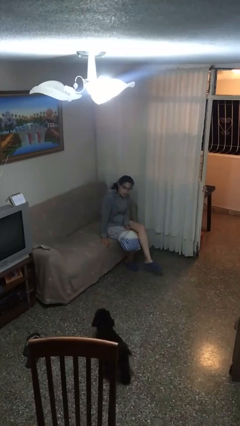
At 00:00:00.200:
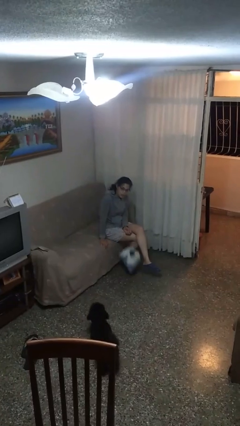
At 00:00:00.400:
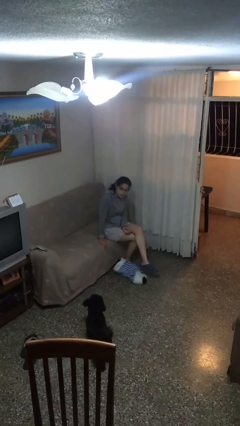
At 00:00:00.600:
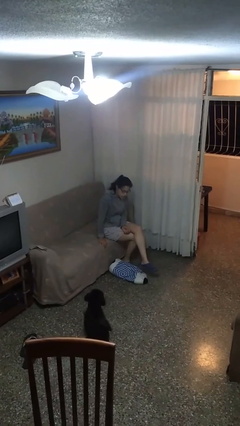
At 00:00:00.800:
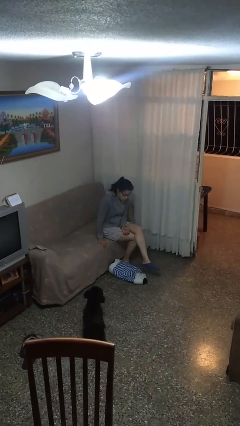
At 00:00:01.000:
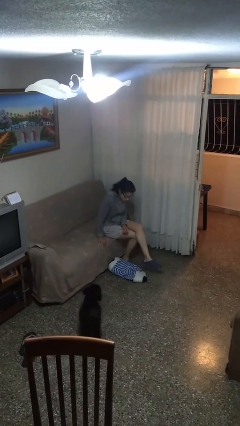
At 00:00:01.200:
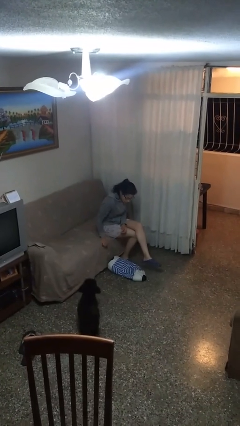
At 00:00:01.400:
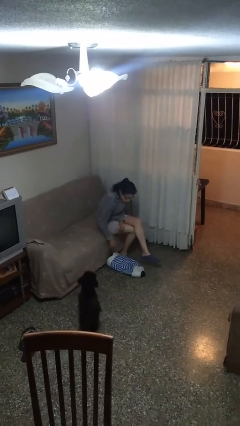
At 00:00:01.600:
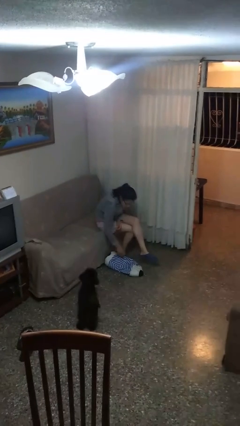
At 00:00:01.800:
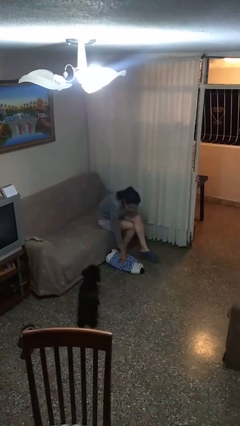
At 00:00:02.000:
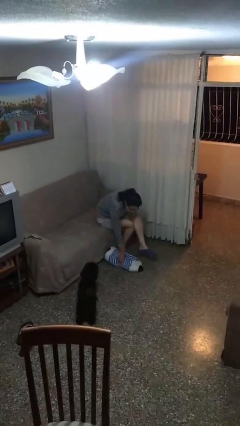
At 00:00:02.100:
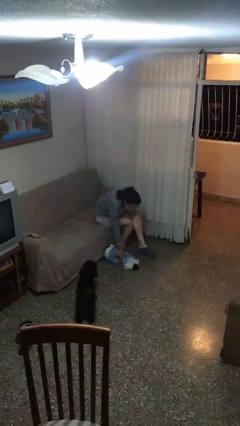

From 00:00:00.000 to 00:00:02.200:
person drops object

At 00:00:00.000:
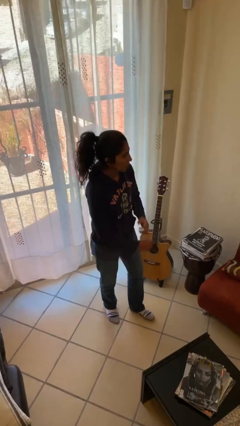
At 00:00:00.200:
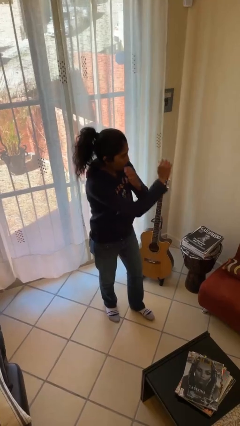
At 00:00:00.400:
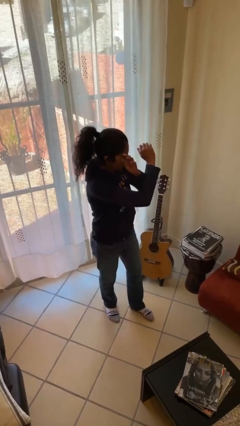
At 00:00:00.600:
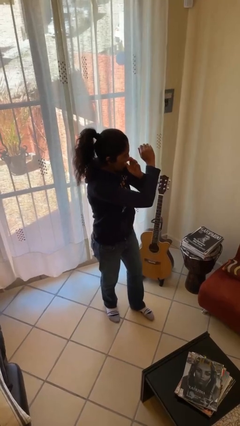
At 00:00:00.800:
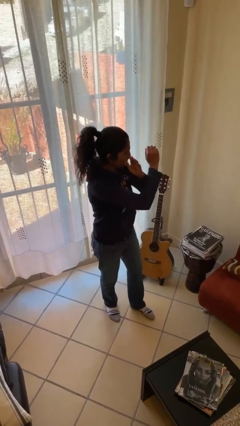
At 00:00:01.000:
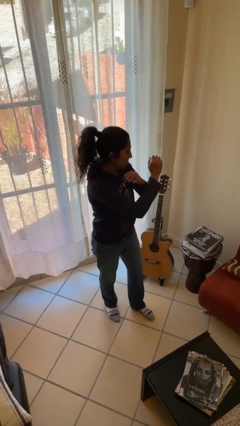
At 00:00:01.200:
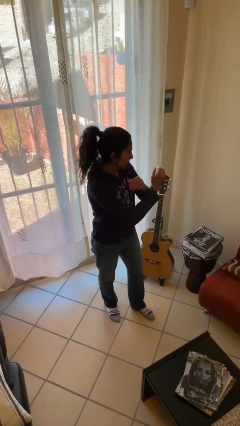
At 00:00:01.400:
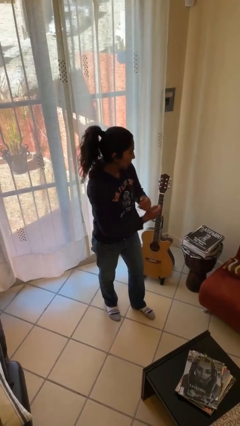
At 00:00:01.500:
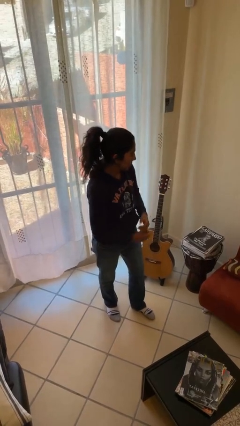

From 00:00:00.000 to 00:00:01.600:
person gestures arms x

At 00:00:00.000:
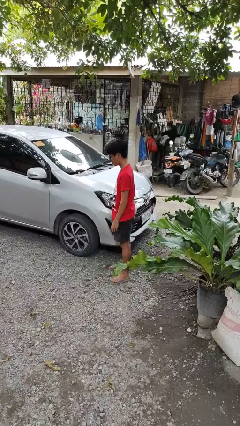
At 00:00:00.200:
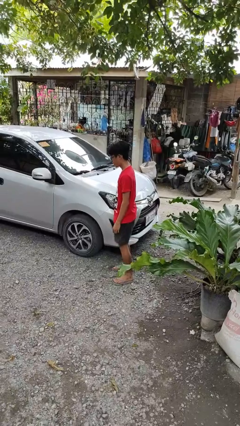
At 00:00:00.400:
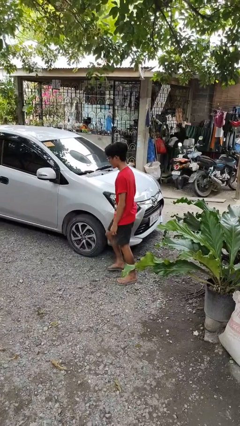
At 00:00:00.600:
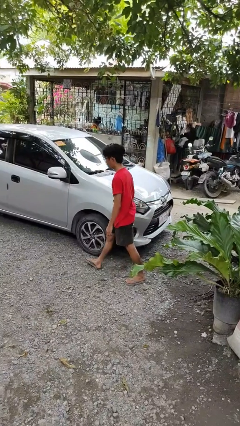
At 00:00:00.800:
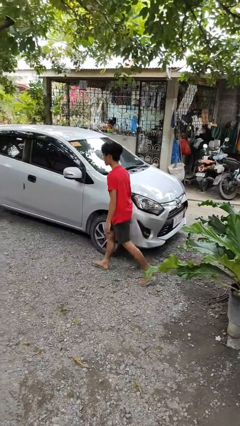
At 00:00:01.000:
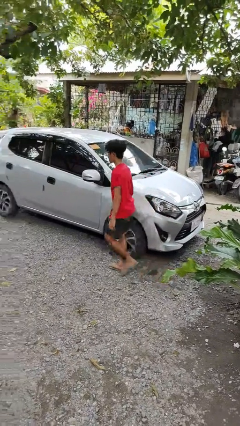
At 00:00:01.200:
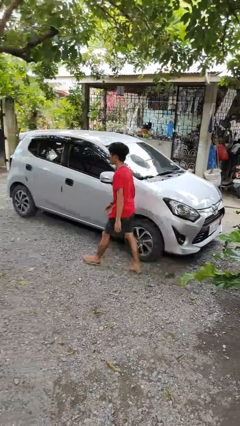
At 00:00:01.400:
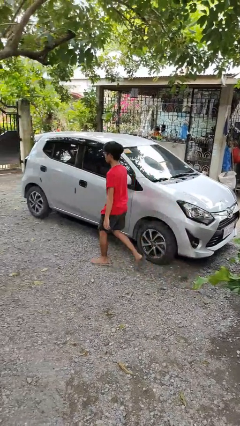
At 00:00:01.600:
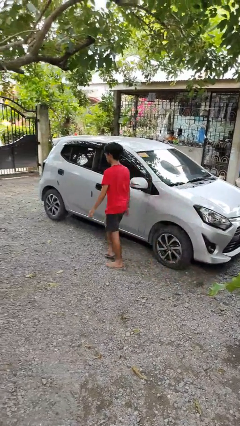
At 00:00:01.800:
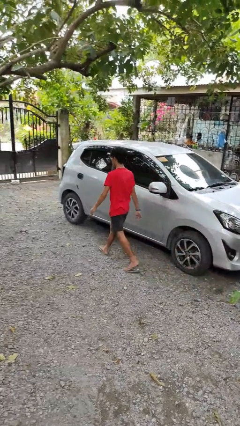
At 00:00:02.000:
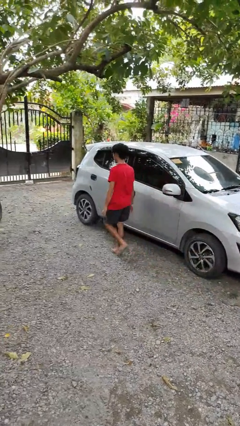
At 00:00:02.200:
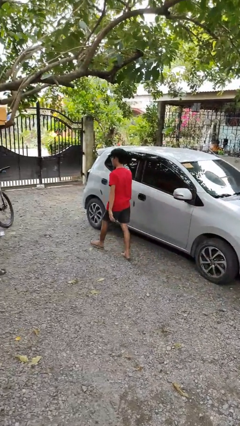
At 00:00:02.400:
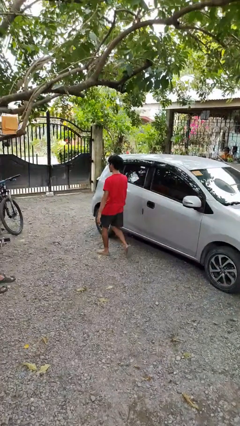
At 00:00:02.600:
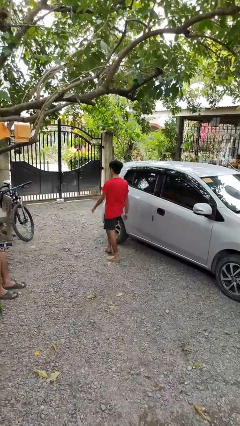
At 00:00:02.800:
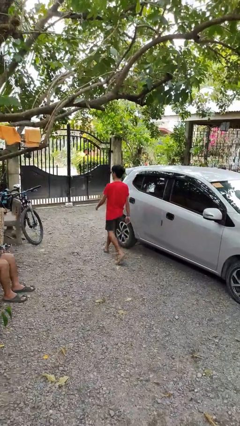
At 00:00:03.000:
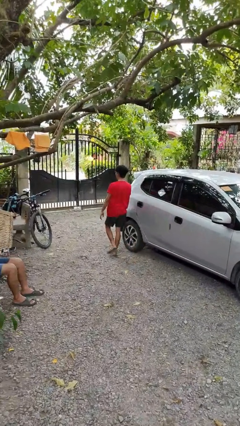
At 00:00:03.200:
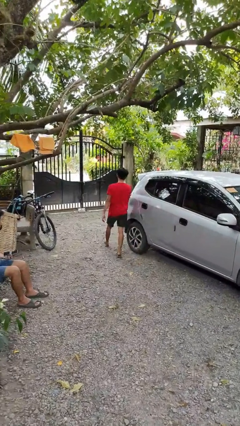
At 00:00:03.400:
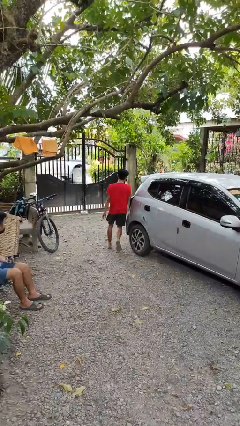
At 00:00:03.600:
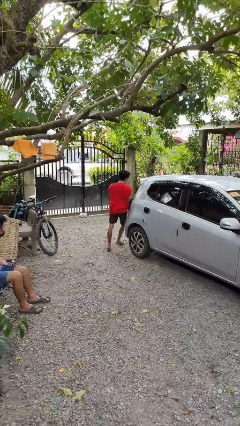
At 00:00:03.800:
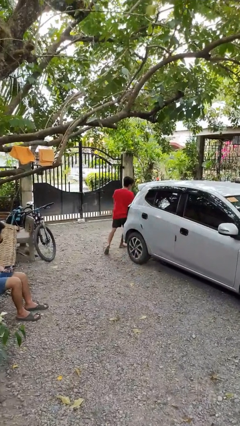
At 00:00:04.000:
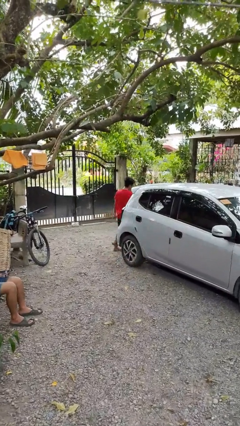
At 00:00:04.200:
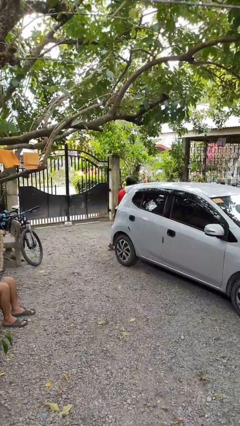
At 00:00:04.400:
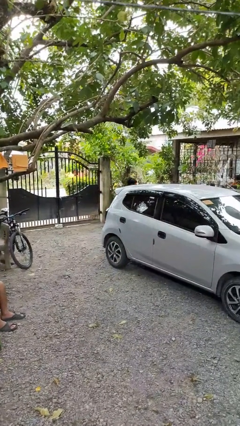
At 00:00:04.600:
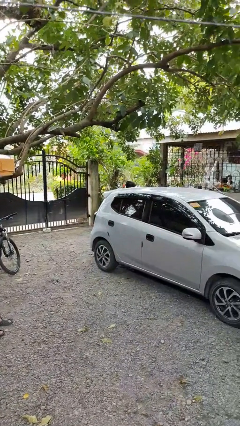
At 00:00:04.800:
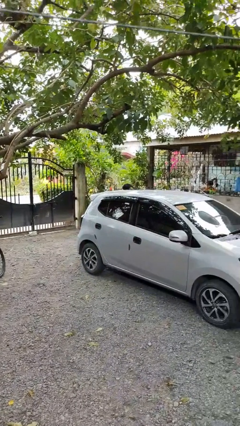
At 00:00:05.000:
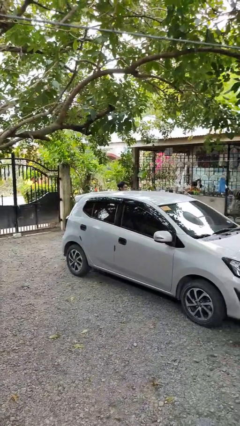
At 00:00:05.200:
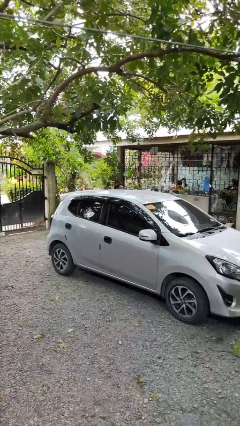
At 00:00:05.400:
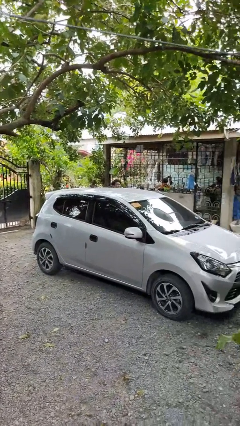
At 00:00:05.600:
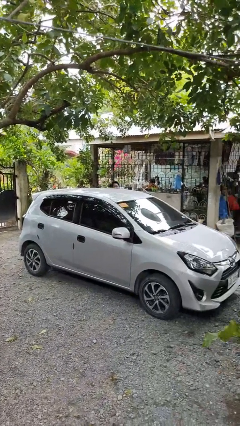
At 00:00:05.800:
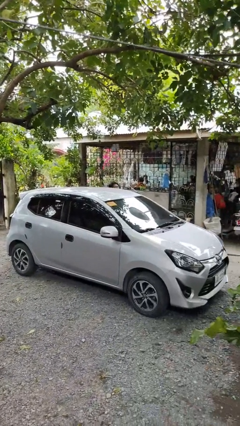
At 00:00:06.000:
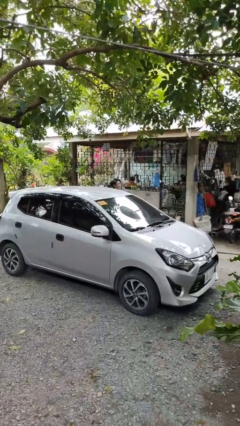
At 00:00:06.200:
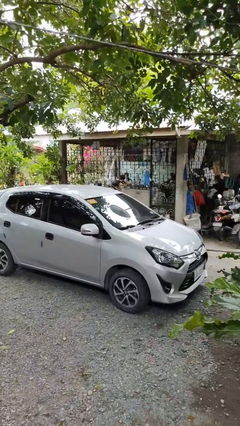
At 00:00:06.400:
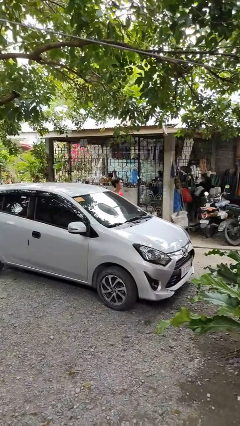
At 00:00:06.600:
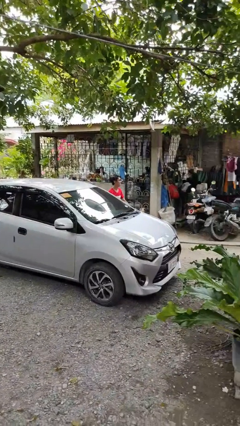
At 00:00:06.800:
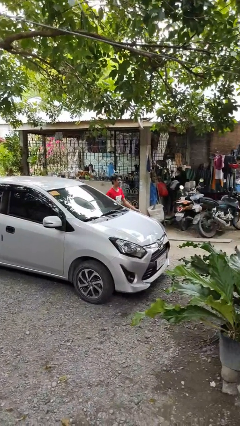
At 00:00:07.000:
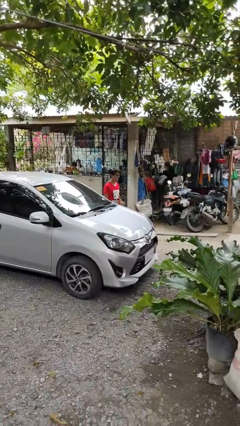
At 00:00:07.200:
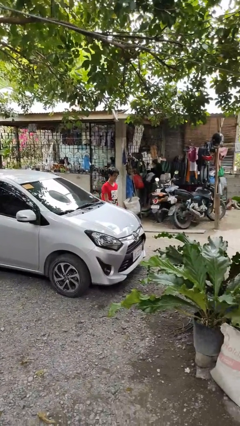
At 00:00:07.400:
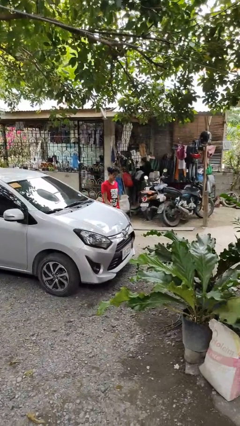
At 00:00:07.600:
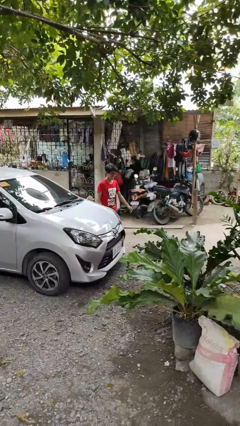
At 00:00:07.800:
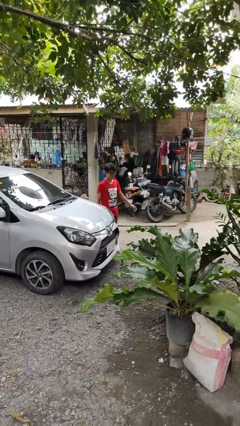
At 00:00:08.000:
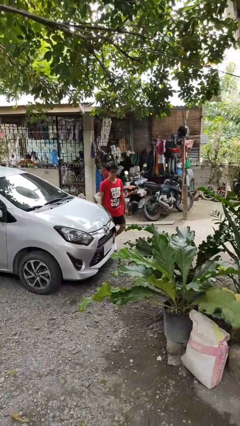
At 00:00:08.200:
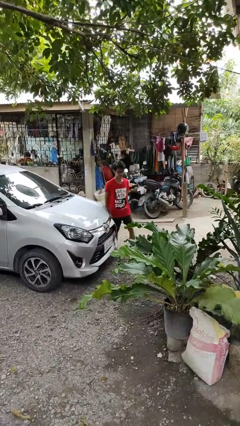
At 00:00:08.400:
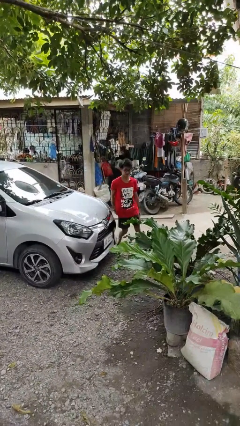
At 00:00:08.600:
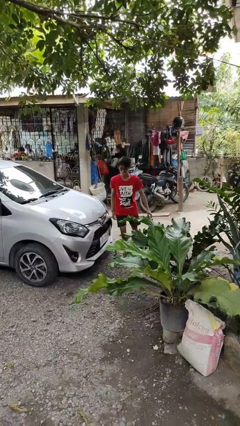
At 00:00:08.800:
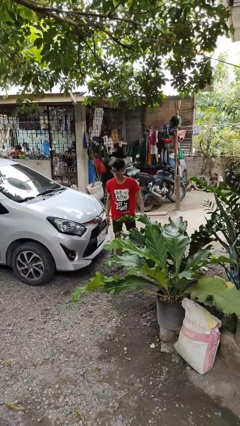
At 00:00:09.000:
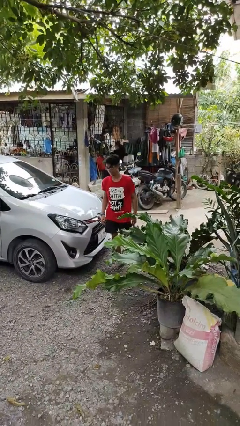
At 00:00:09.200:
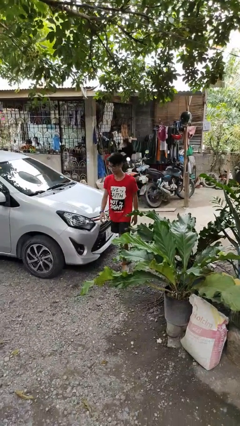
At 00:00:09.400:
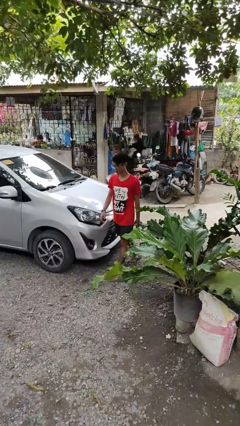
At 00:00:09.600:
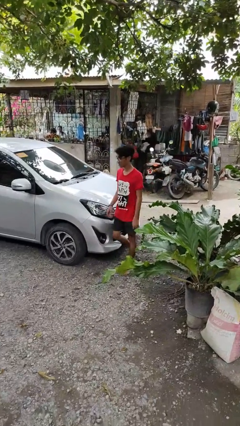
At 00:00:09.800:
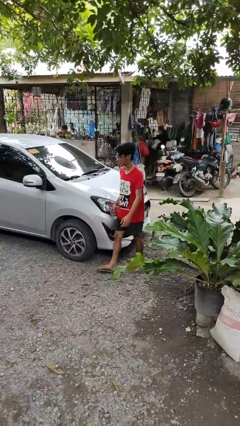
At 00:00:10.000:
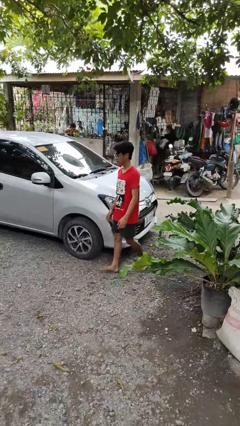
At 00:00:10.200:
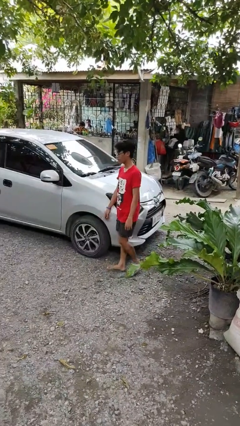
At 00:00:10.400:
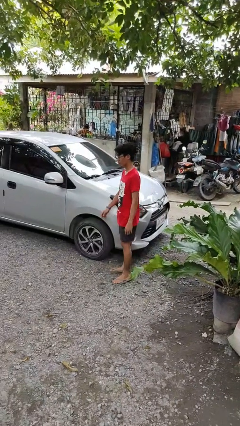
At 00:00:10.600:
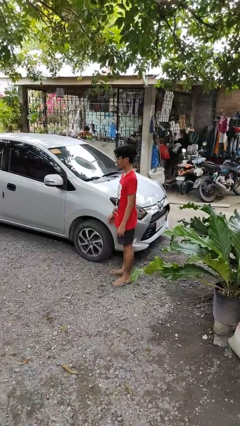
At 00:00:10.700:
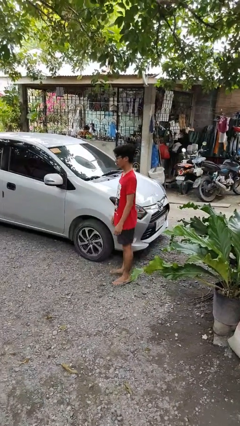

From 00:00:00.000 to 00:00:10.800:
person walks around car

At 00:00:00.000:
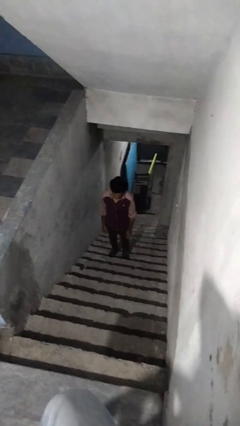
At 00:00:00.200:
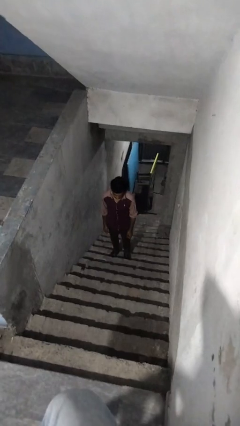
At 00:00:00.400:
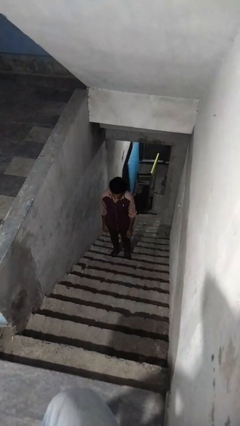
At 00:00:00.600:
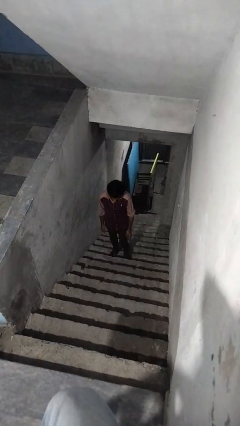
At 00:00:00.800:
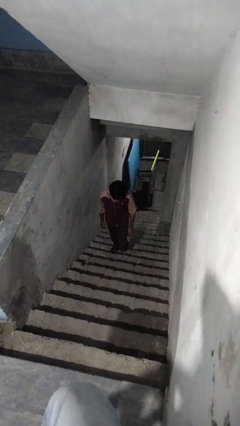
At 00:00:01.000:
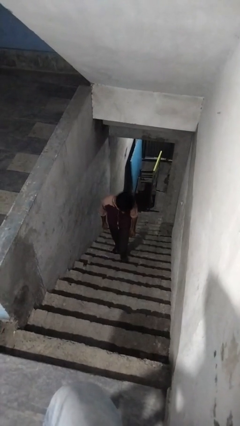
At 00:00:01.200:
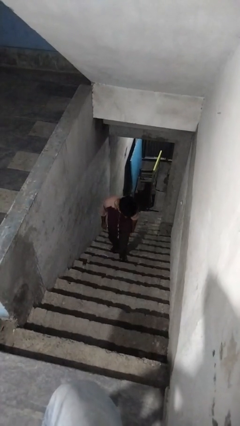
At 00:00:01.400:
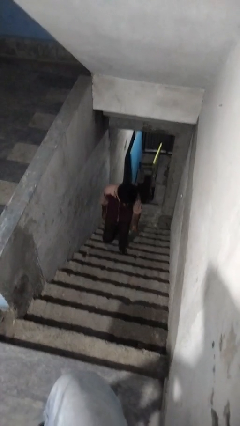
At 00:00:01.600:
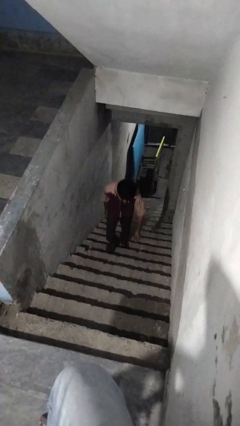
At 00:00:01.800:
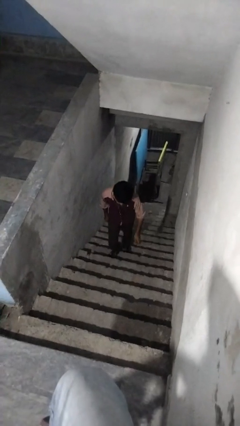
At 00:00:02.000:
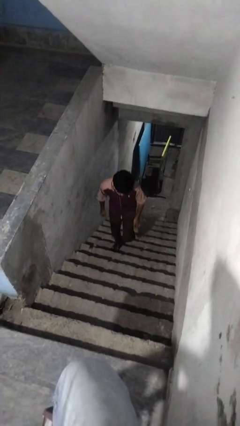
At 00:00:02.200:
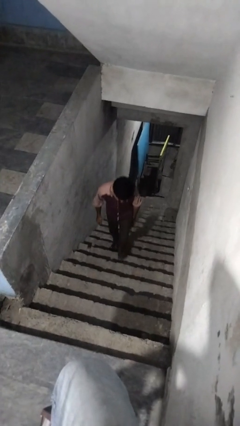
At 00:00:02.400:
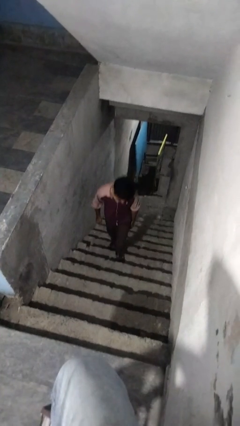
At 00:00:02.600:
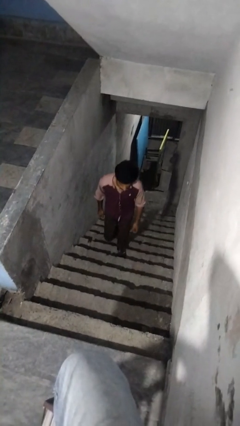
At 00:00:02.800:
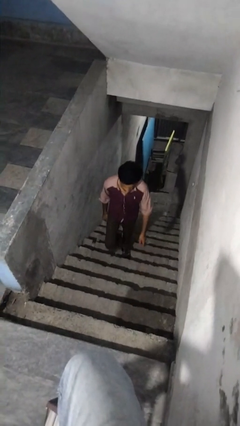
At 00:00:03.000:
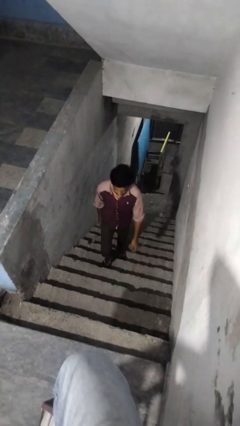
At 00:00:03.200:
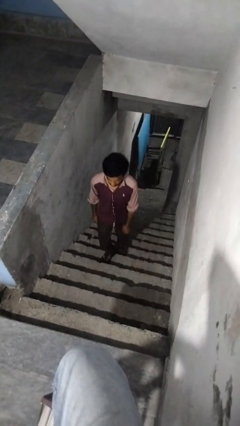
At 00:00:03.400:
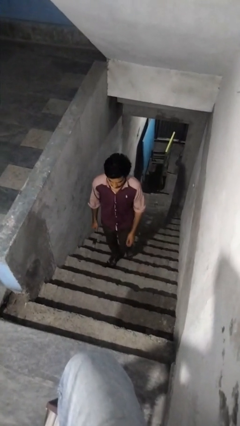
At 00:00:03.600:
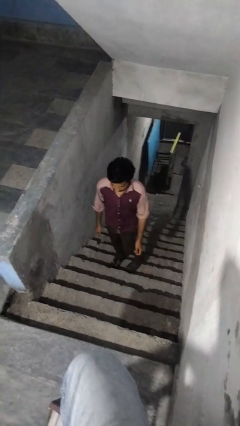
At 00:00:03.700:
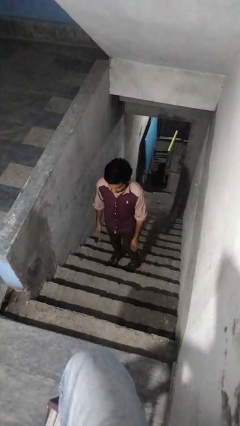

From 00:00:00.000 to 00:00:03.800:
person climbs up stairs
